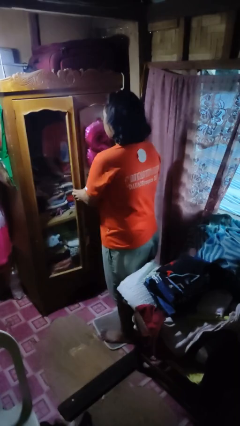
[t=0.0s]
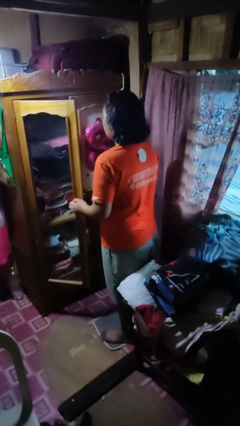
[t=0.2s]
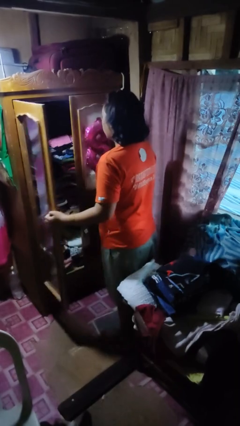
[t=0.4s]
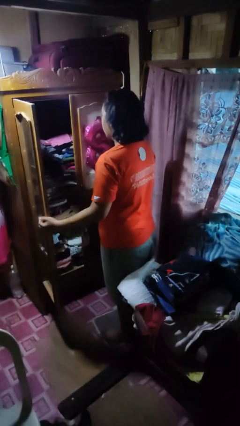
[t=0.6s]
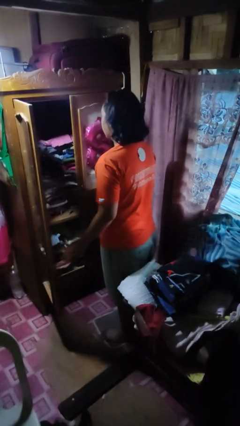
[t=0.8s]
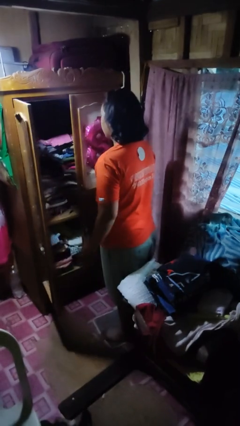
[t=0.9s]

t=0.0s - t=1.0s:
person opens closet door

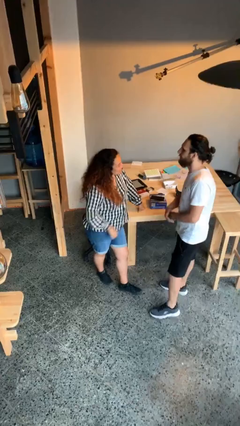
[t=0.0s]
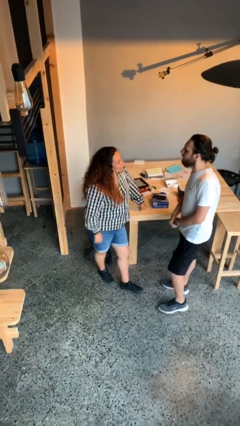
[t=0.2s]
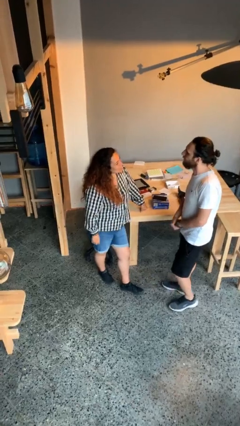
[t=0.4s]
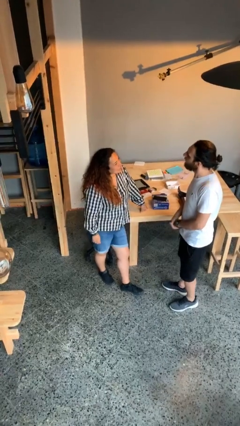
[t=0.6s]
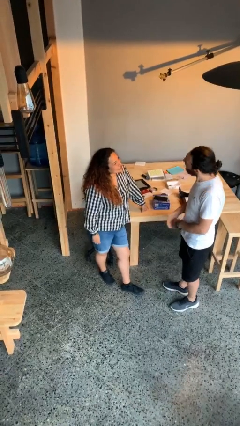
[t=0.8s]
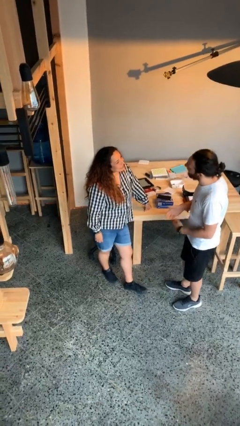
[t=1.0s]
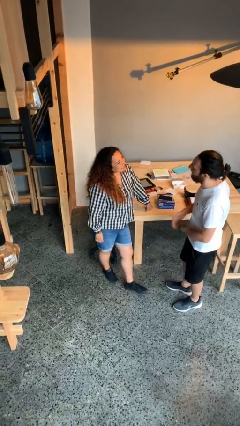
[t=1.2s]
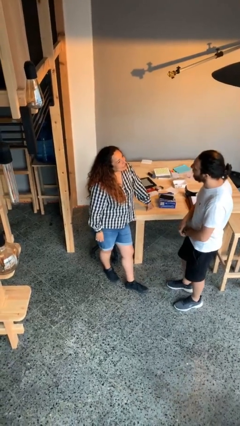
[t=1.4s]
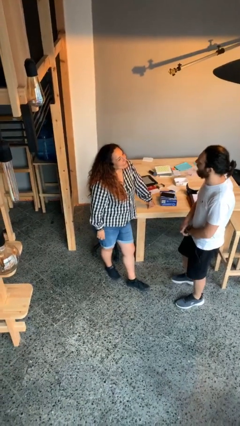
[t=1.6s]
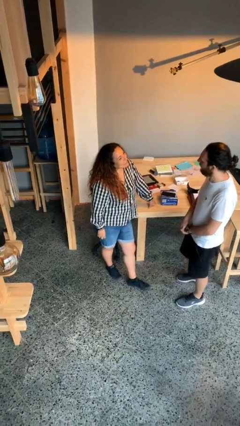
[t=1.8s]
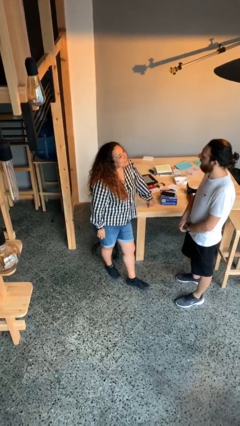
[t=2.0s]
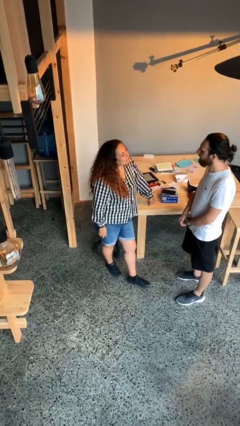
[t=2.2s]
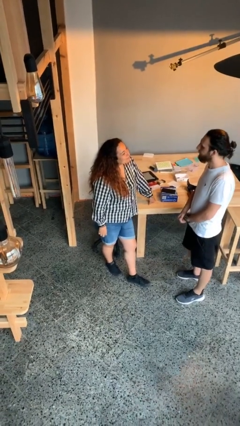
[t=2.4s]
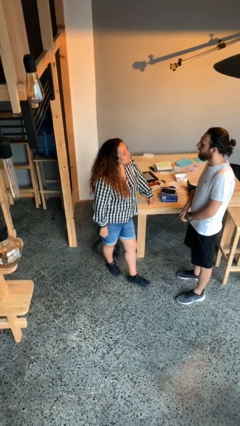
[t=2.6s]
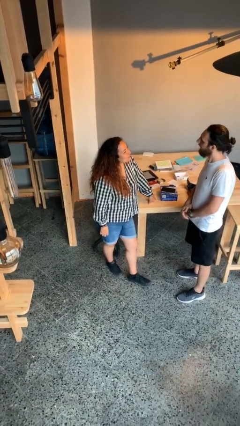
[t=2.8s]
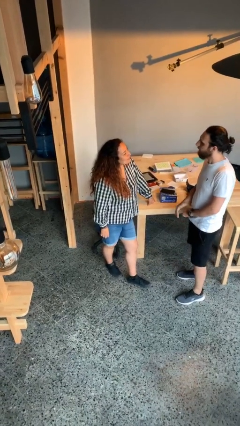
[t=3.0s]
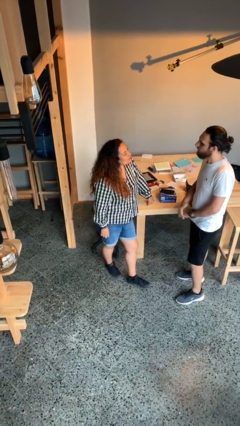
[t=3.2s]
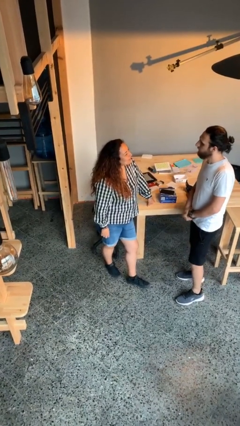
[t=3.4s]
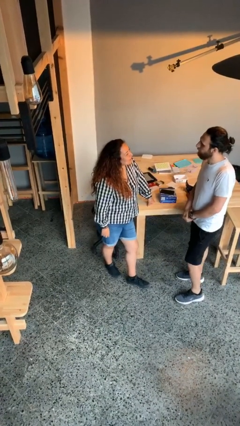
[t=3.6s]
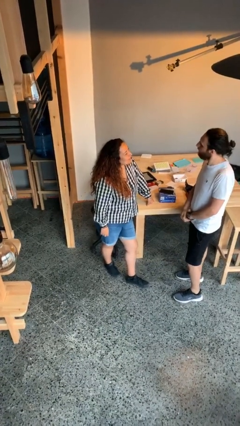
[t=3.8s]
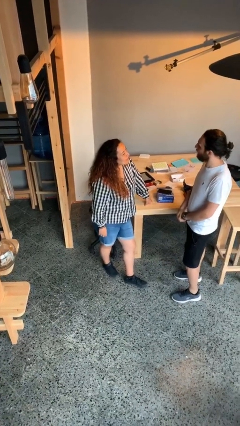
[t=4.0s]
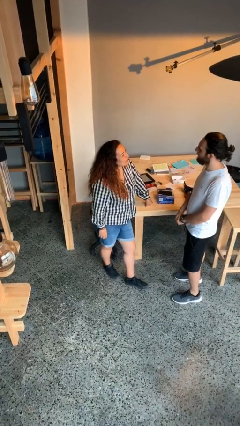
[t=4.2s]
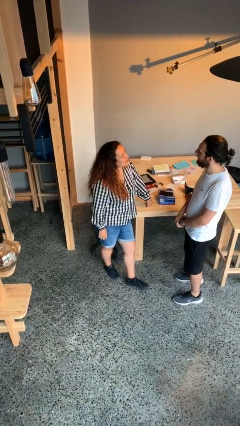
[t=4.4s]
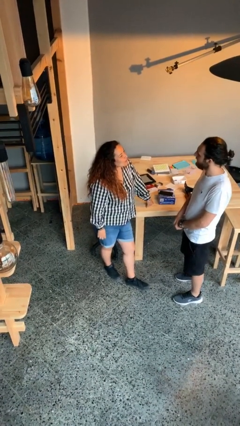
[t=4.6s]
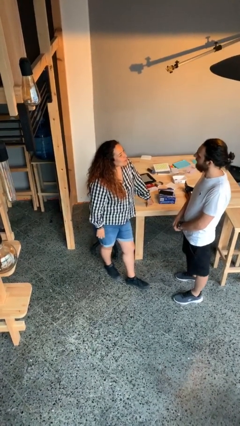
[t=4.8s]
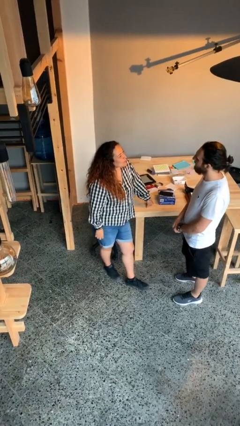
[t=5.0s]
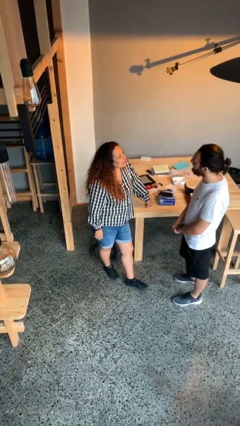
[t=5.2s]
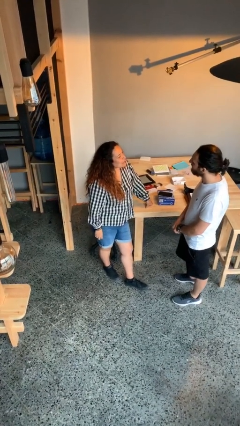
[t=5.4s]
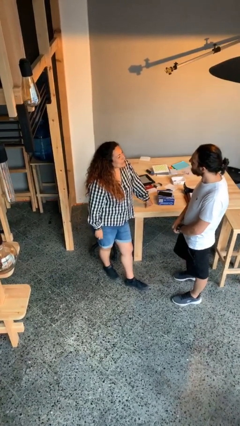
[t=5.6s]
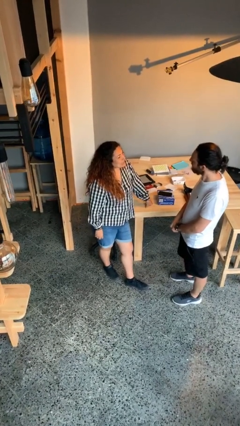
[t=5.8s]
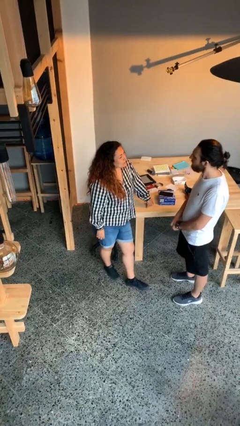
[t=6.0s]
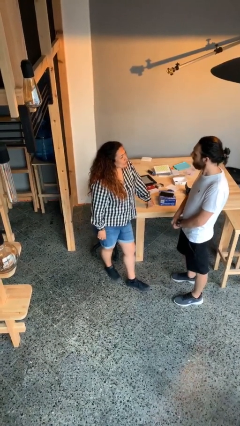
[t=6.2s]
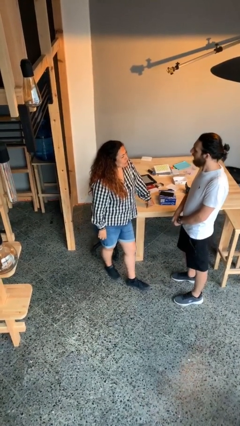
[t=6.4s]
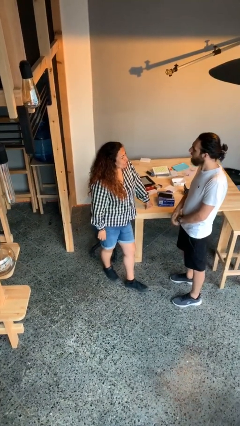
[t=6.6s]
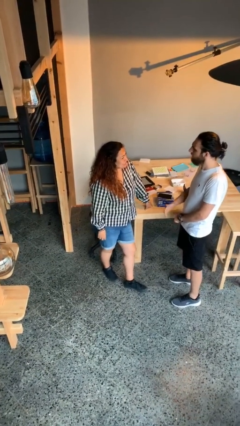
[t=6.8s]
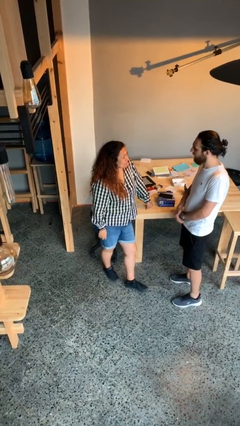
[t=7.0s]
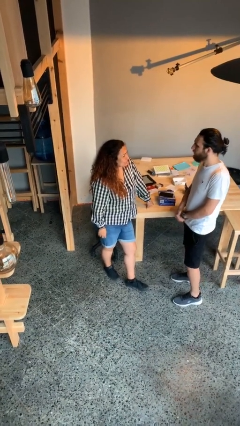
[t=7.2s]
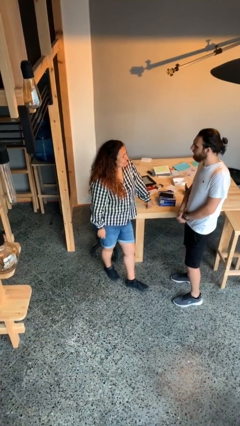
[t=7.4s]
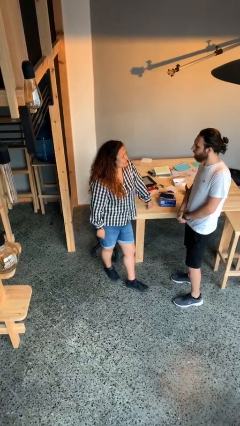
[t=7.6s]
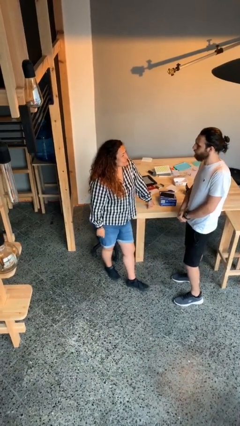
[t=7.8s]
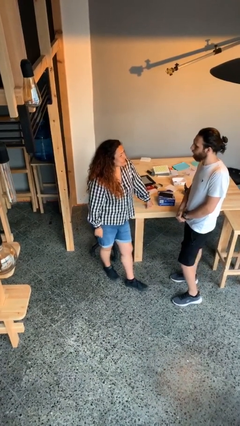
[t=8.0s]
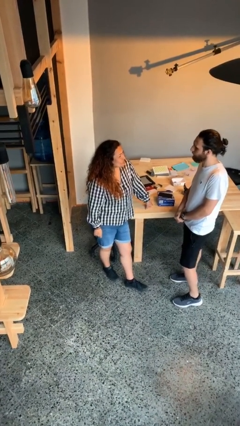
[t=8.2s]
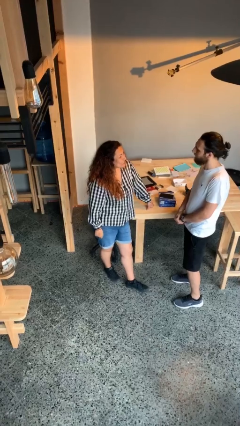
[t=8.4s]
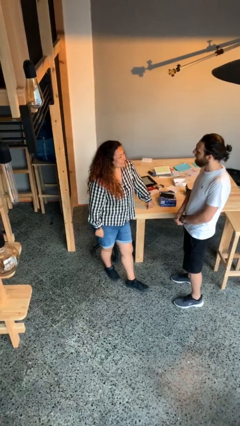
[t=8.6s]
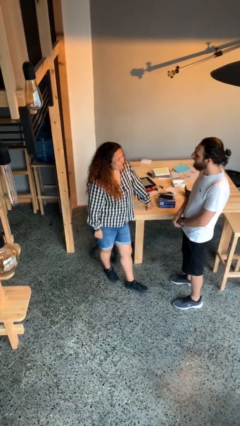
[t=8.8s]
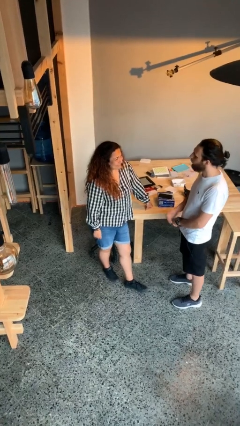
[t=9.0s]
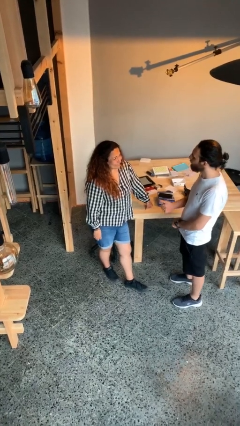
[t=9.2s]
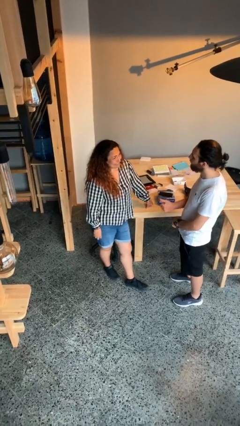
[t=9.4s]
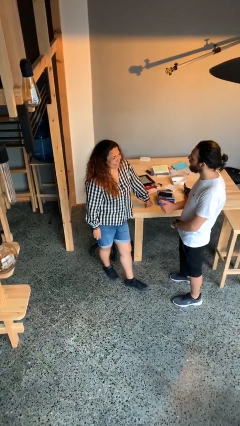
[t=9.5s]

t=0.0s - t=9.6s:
person talks to person

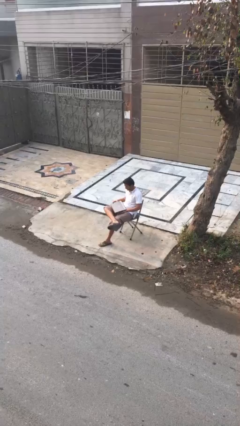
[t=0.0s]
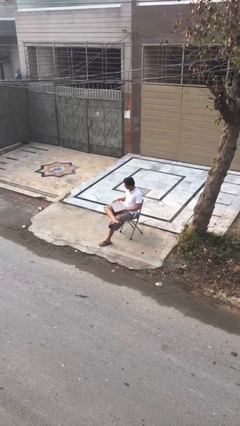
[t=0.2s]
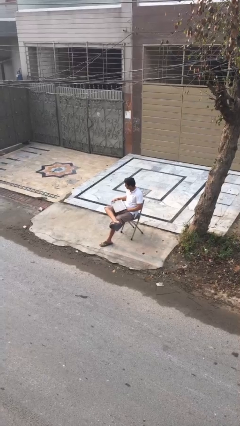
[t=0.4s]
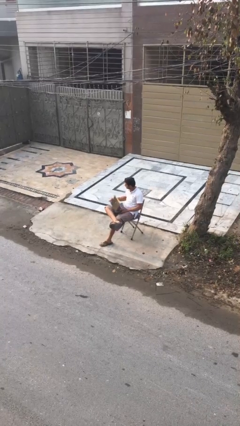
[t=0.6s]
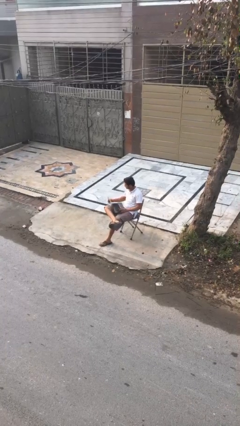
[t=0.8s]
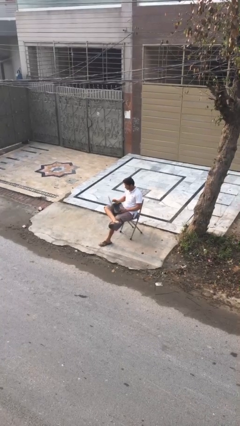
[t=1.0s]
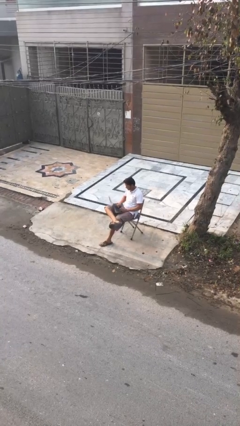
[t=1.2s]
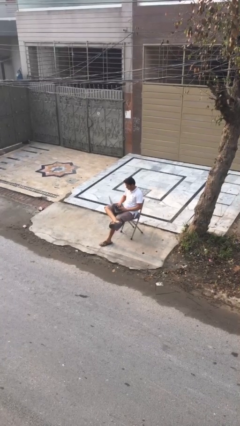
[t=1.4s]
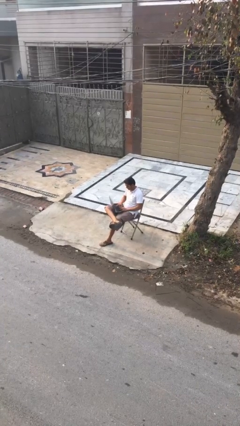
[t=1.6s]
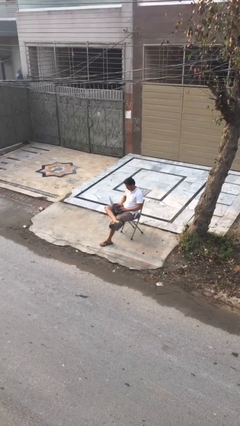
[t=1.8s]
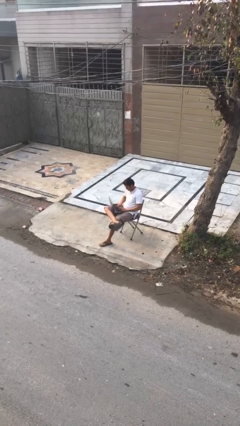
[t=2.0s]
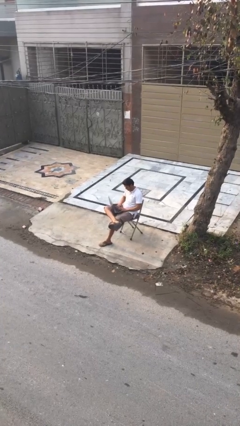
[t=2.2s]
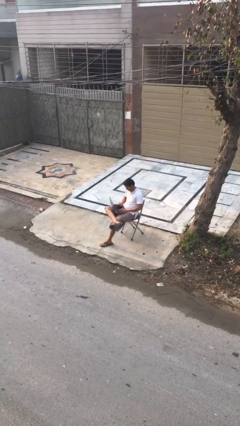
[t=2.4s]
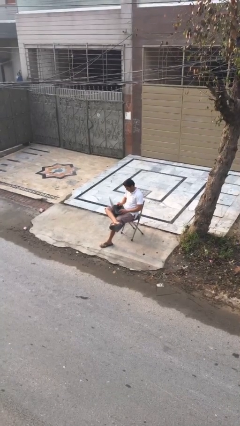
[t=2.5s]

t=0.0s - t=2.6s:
person interacts with laptop

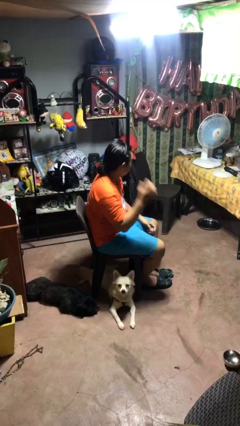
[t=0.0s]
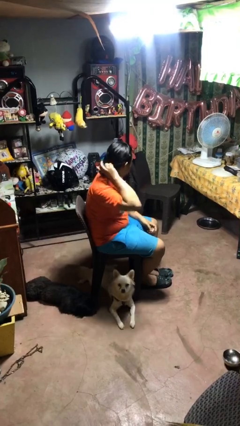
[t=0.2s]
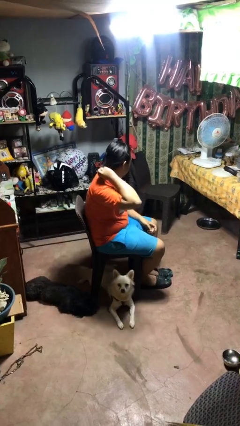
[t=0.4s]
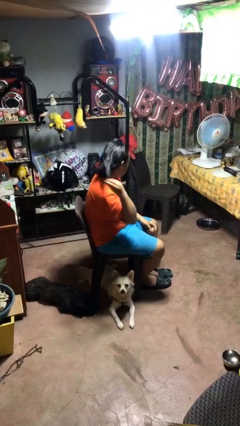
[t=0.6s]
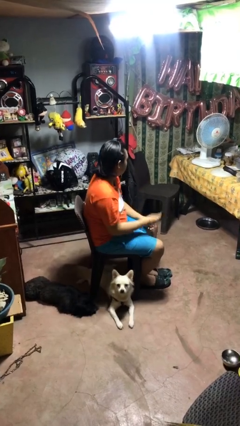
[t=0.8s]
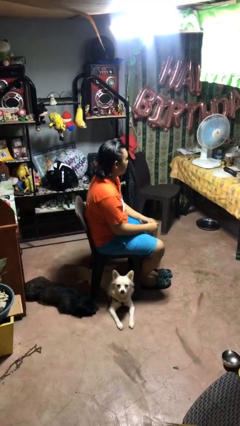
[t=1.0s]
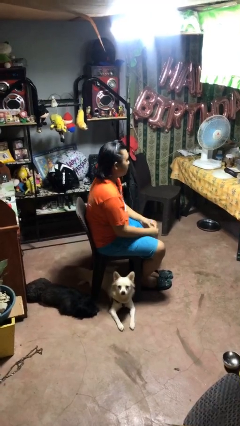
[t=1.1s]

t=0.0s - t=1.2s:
person takes off hairtie

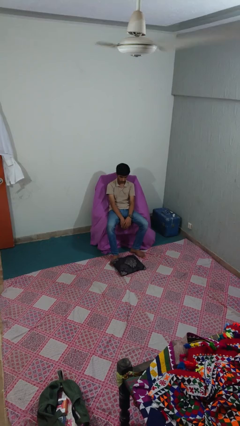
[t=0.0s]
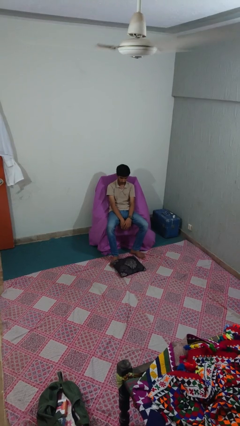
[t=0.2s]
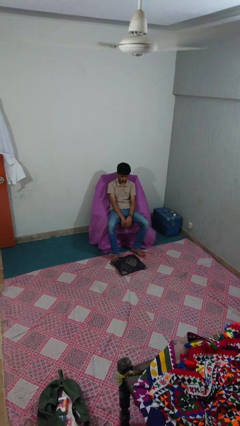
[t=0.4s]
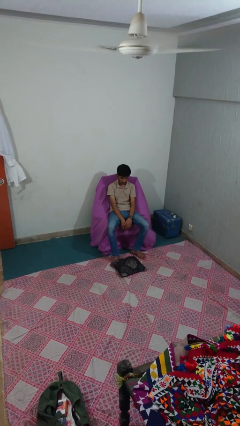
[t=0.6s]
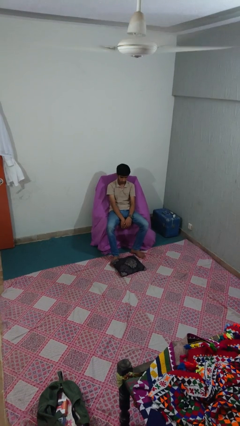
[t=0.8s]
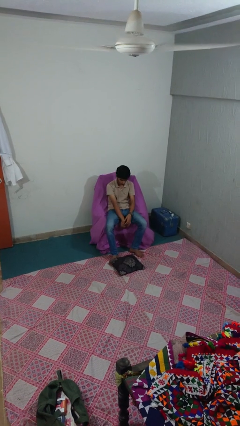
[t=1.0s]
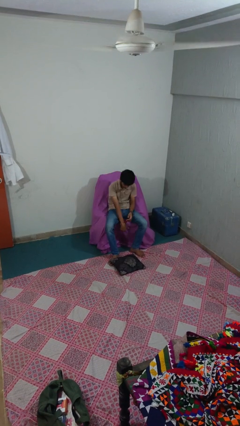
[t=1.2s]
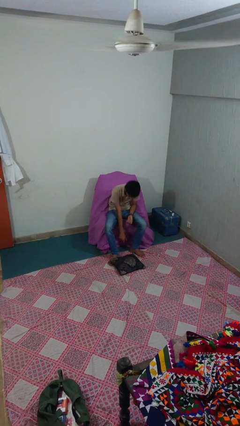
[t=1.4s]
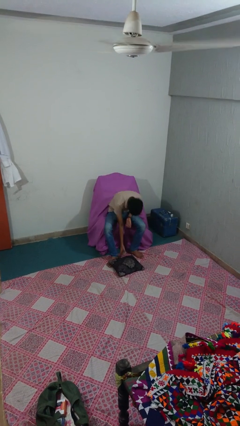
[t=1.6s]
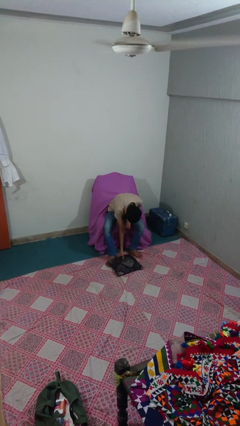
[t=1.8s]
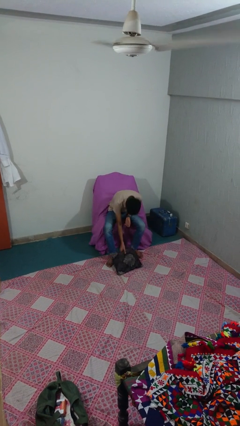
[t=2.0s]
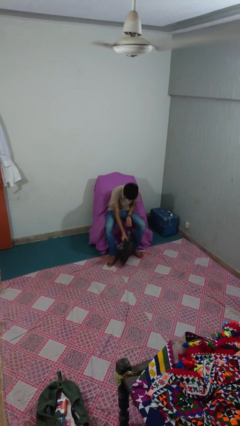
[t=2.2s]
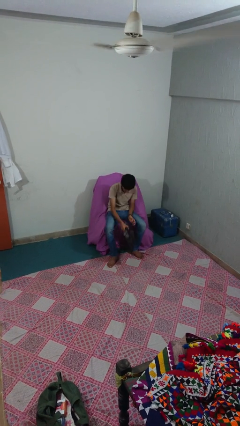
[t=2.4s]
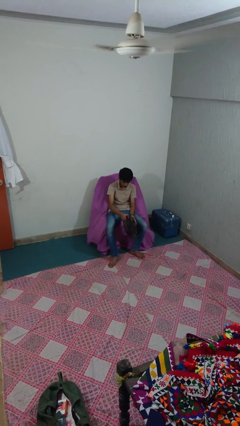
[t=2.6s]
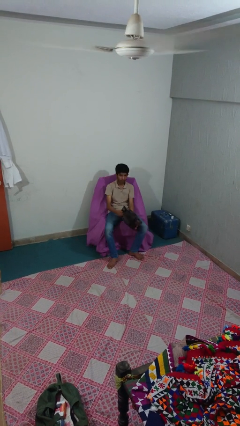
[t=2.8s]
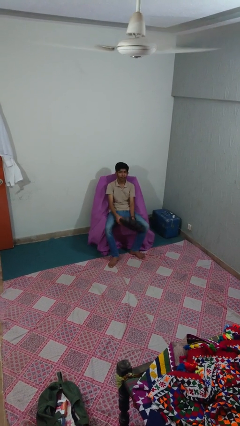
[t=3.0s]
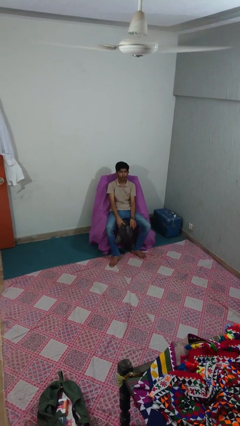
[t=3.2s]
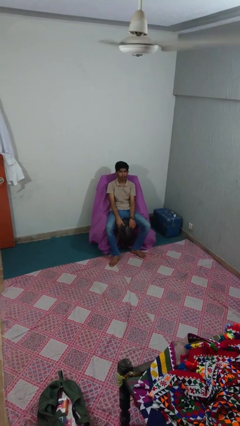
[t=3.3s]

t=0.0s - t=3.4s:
person picks up object from floor
